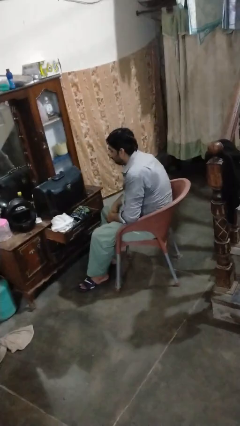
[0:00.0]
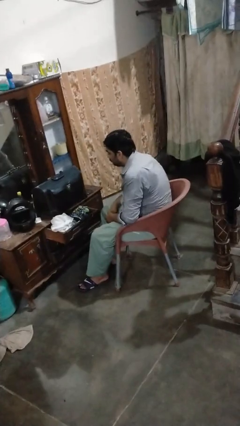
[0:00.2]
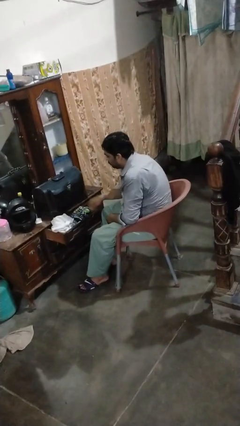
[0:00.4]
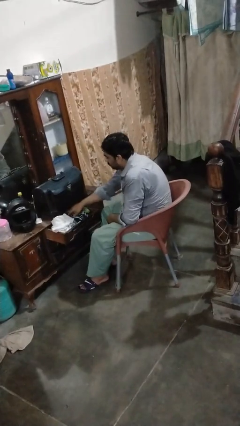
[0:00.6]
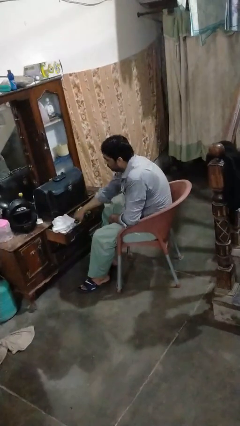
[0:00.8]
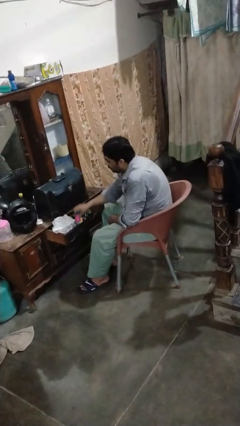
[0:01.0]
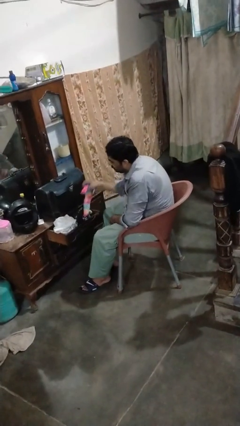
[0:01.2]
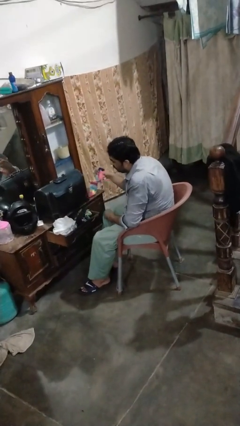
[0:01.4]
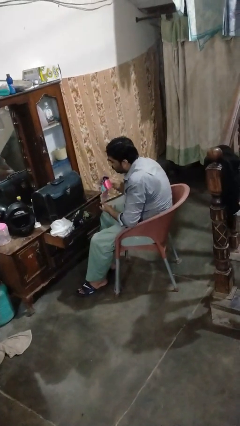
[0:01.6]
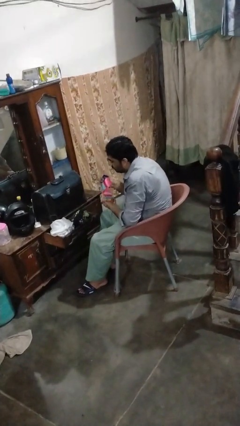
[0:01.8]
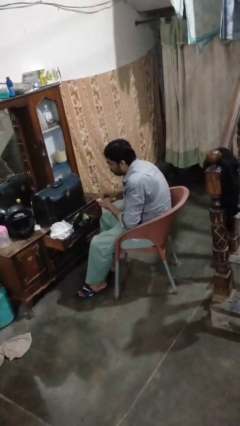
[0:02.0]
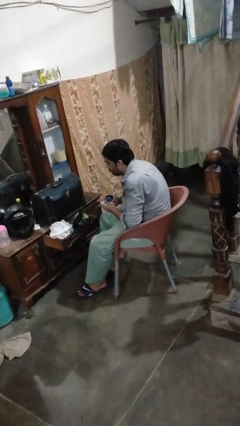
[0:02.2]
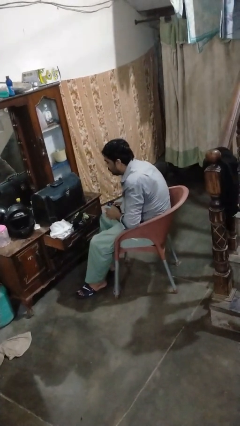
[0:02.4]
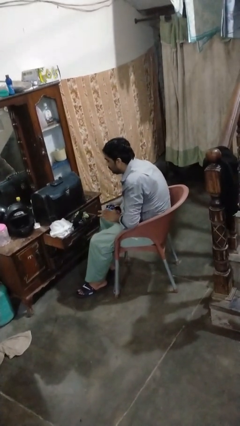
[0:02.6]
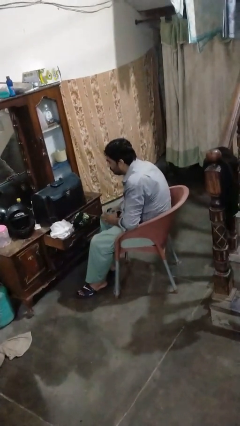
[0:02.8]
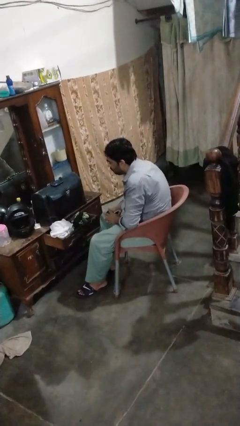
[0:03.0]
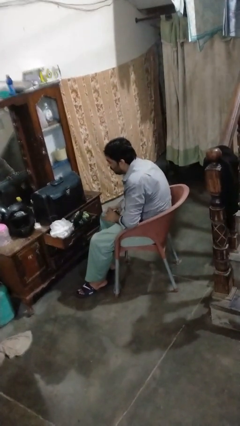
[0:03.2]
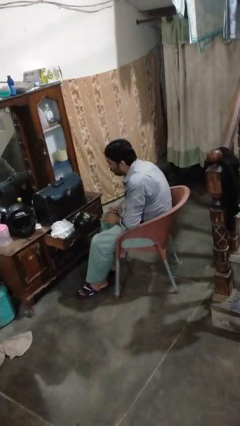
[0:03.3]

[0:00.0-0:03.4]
person takes clothes from dresser

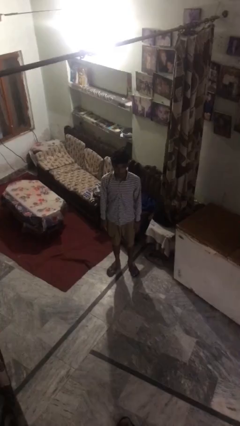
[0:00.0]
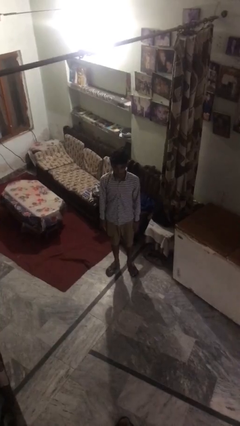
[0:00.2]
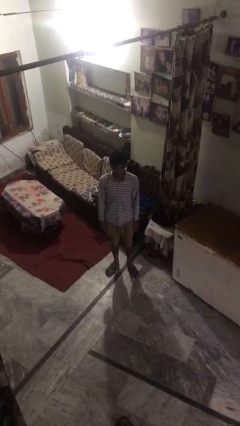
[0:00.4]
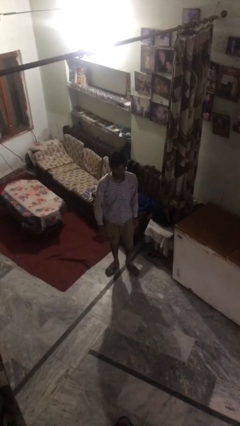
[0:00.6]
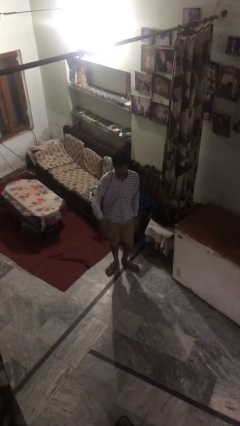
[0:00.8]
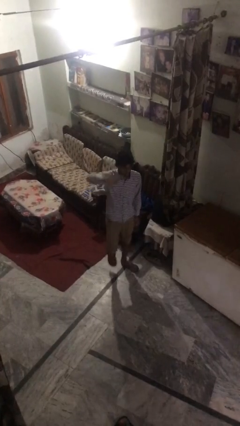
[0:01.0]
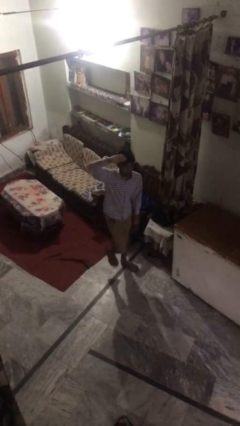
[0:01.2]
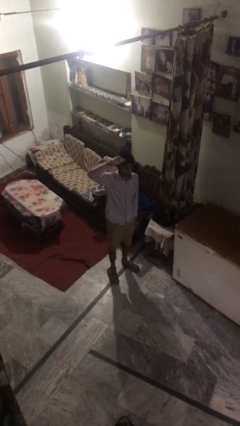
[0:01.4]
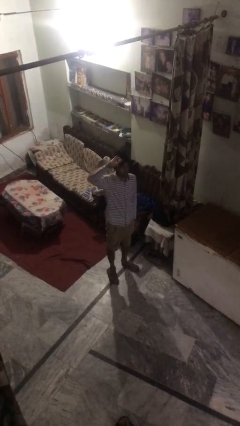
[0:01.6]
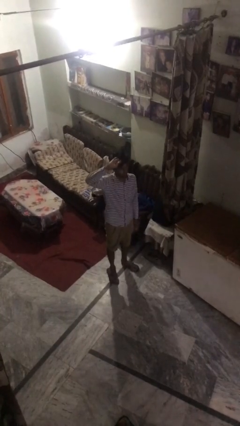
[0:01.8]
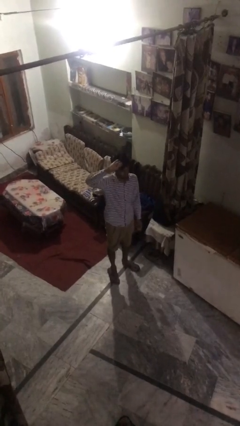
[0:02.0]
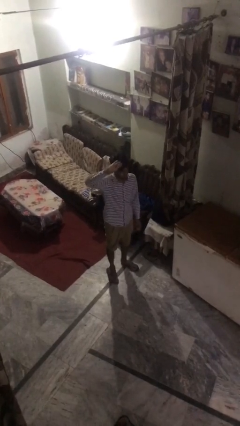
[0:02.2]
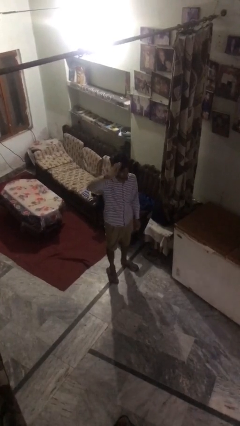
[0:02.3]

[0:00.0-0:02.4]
person salutes

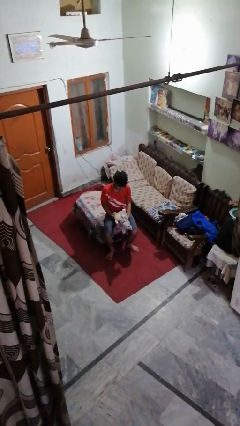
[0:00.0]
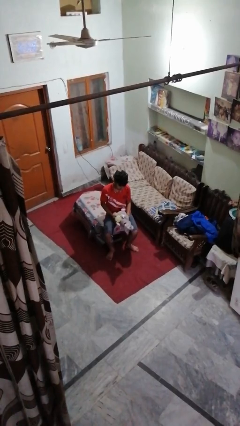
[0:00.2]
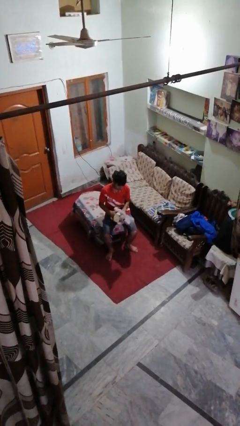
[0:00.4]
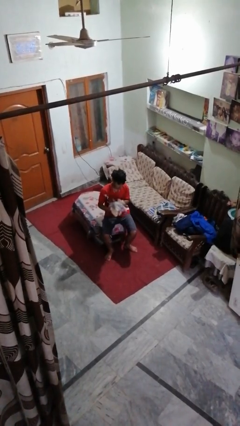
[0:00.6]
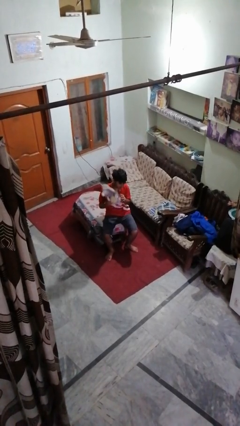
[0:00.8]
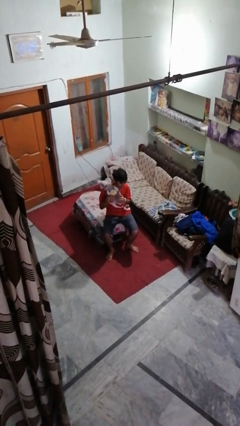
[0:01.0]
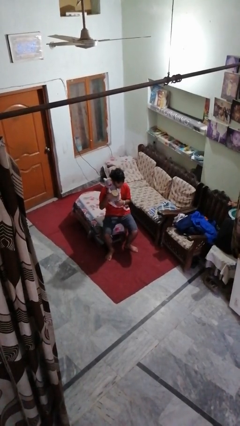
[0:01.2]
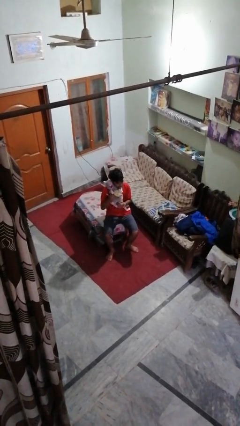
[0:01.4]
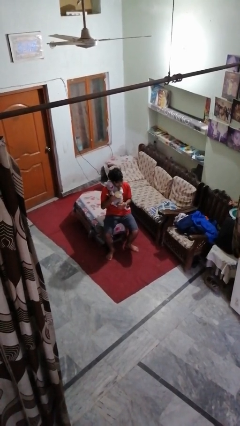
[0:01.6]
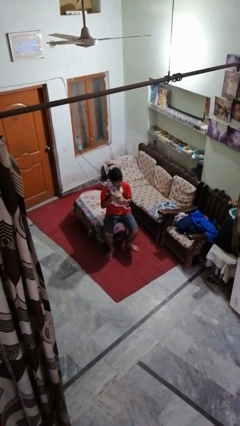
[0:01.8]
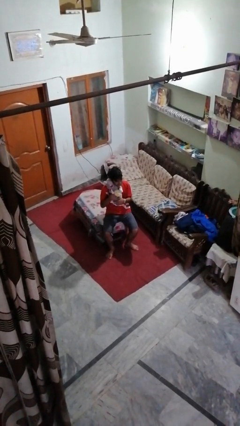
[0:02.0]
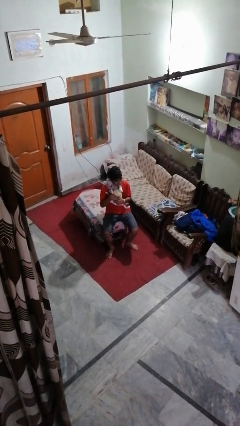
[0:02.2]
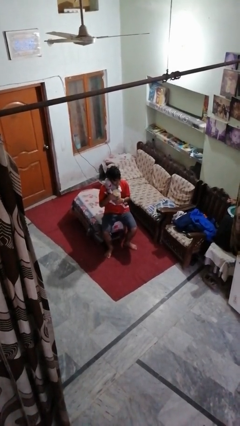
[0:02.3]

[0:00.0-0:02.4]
person hugs stuffed animal

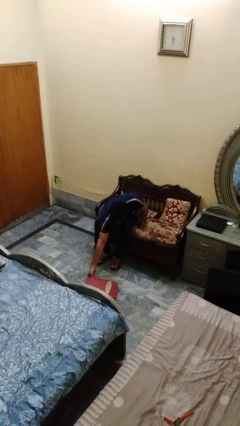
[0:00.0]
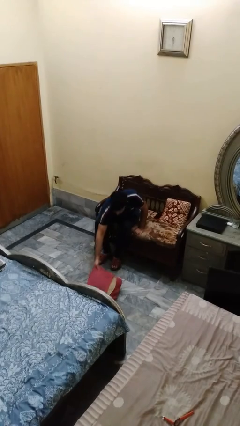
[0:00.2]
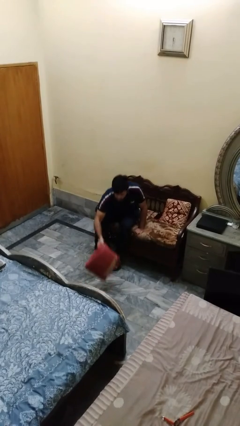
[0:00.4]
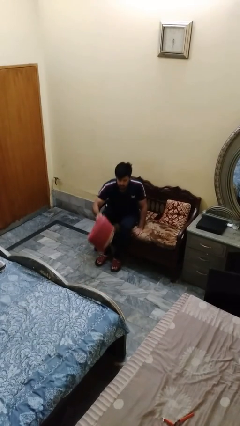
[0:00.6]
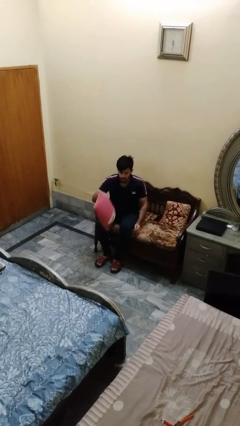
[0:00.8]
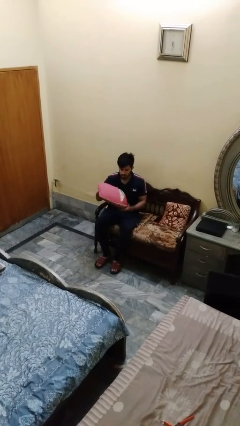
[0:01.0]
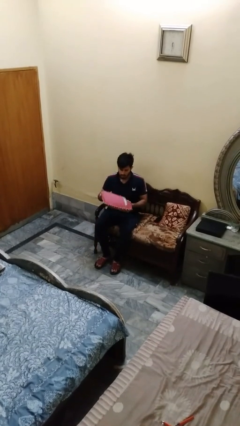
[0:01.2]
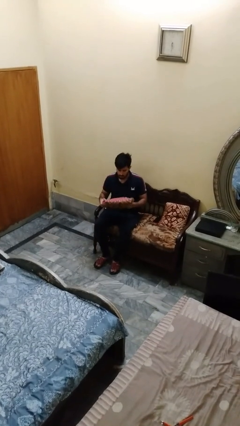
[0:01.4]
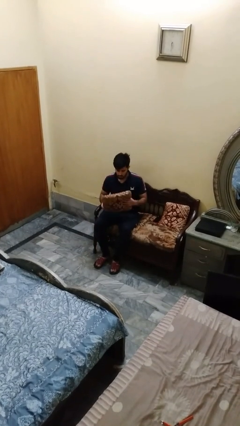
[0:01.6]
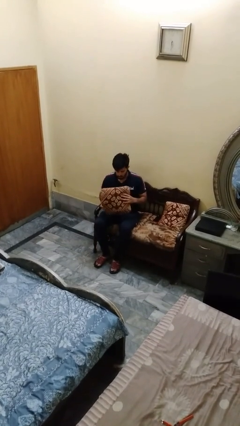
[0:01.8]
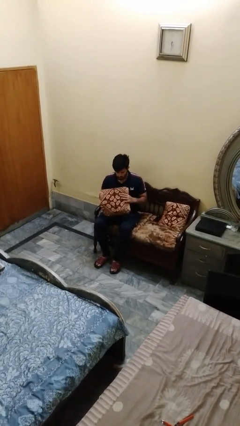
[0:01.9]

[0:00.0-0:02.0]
person picks up object from floor

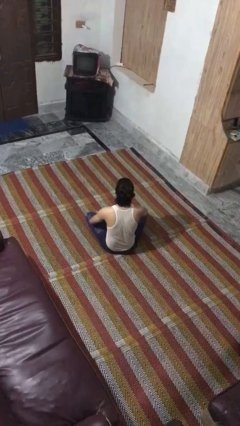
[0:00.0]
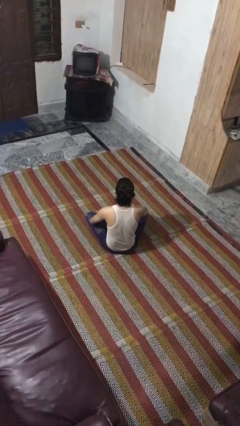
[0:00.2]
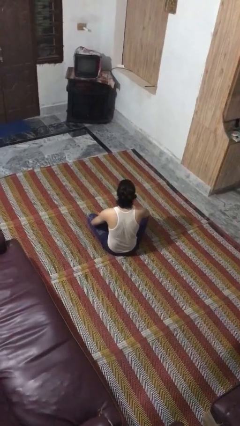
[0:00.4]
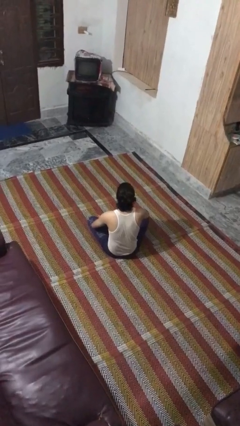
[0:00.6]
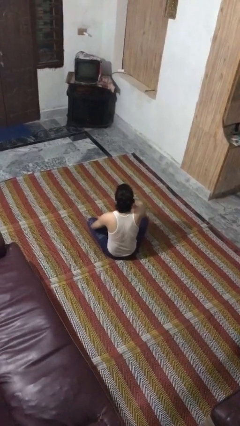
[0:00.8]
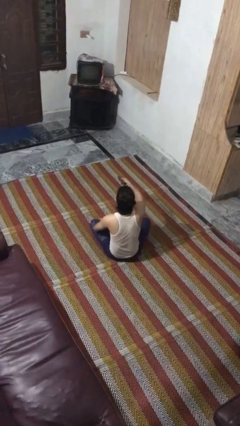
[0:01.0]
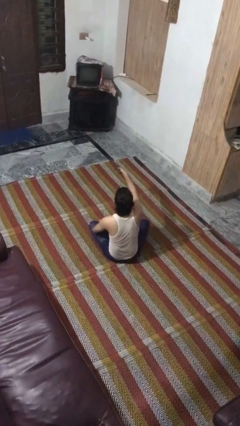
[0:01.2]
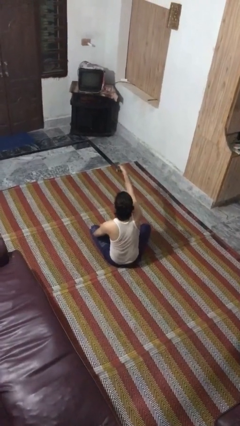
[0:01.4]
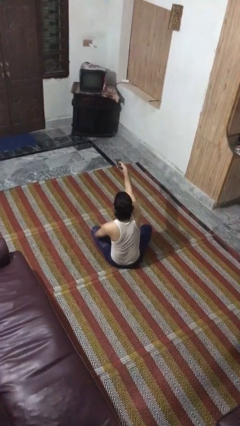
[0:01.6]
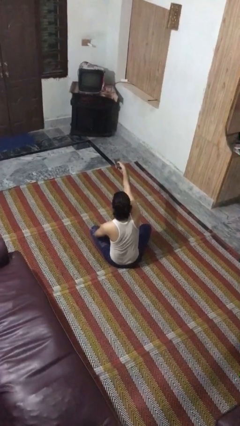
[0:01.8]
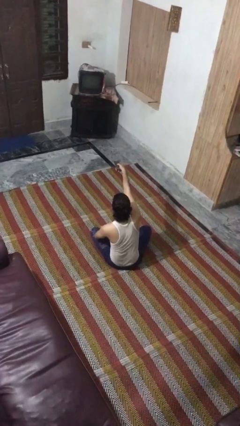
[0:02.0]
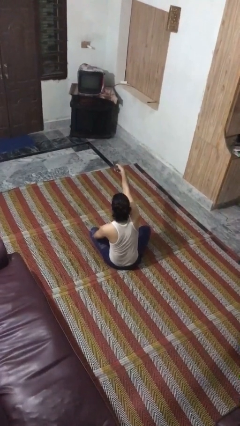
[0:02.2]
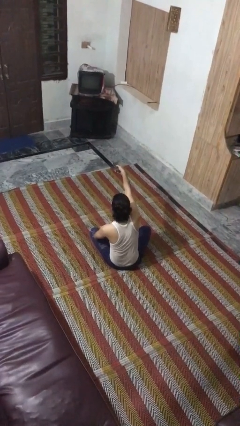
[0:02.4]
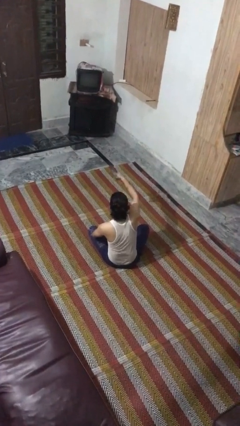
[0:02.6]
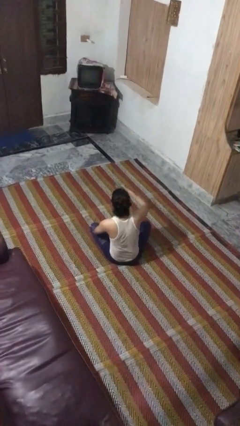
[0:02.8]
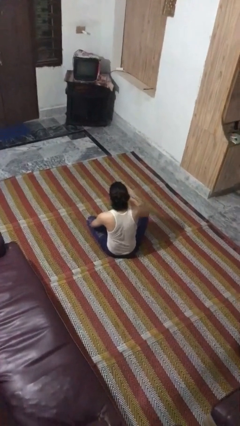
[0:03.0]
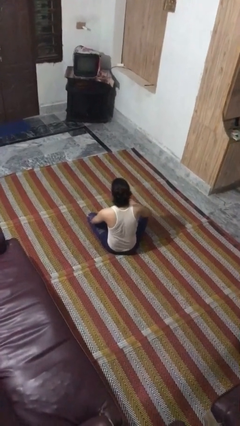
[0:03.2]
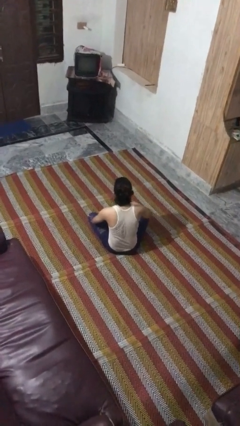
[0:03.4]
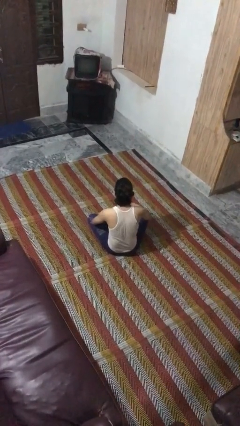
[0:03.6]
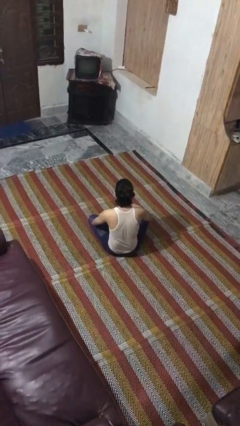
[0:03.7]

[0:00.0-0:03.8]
person uses television remote

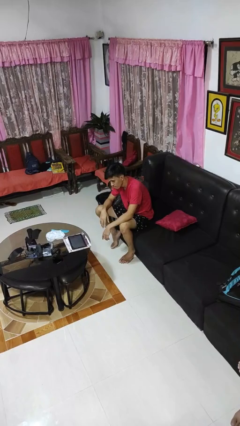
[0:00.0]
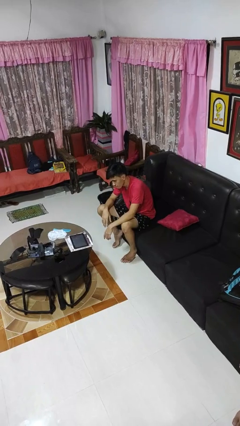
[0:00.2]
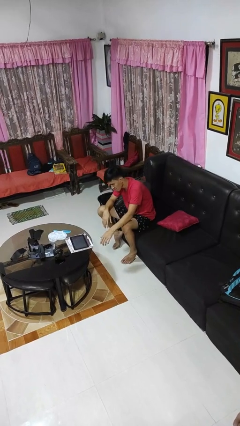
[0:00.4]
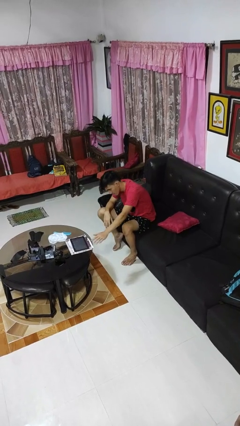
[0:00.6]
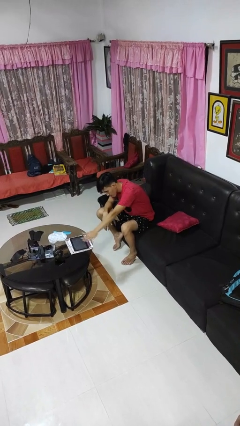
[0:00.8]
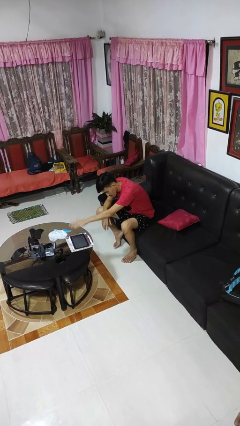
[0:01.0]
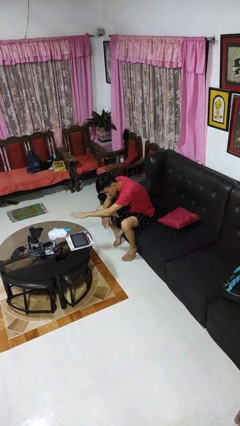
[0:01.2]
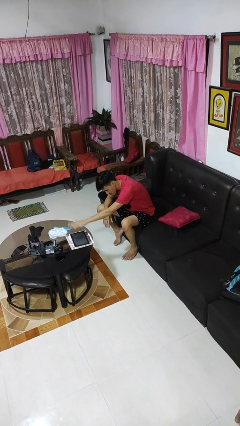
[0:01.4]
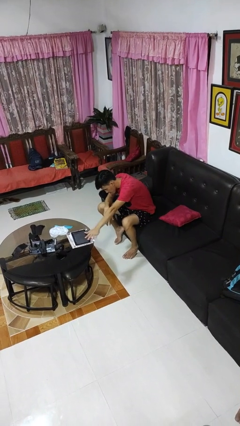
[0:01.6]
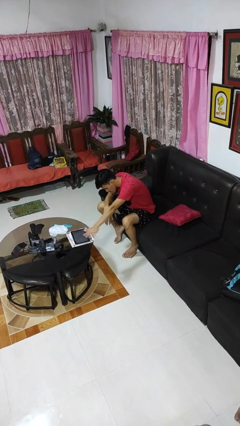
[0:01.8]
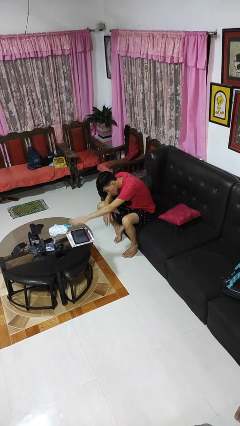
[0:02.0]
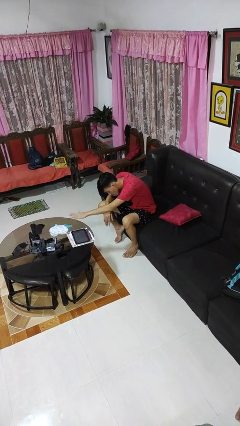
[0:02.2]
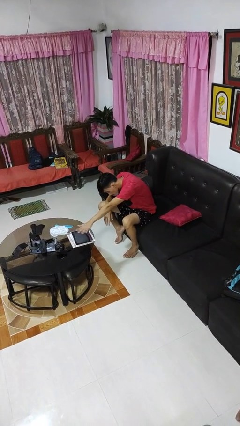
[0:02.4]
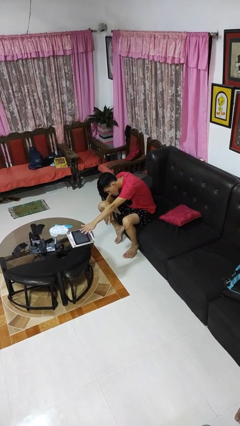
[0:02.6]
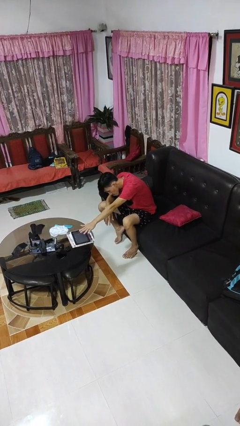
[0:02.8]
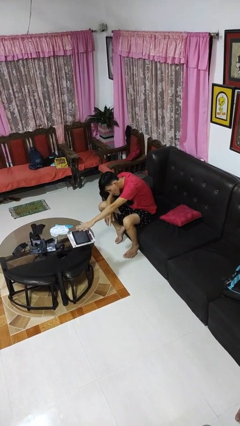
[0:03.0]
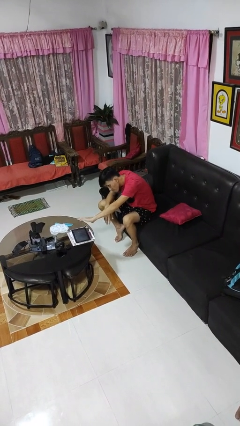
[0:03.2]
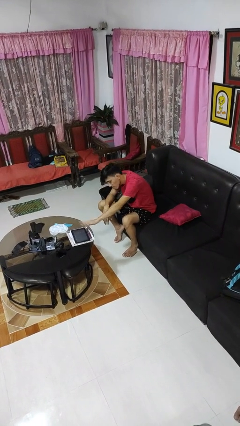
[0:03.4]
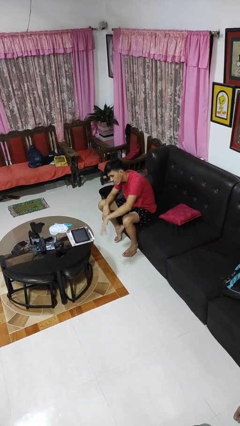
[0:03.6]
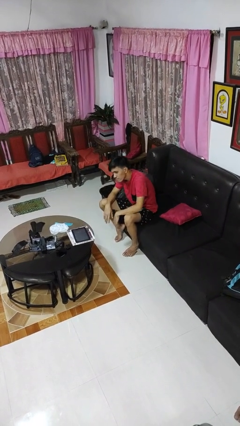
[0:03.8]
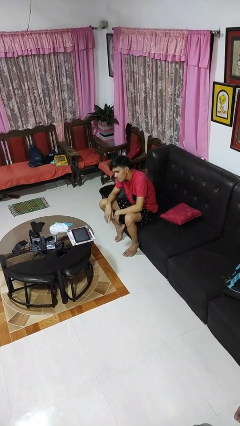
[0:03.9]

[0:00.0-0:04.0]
person waves hand over object
